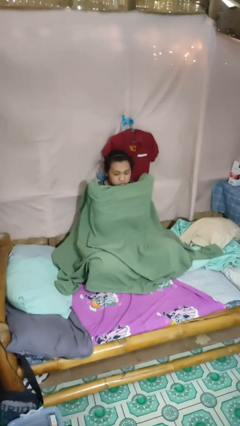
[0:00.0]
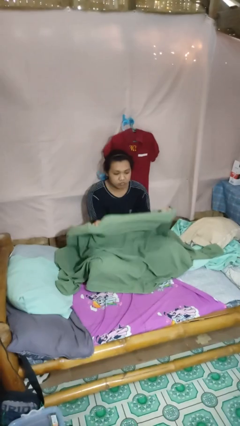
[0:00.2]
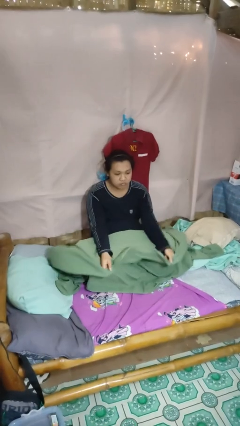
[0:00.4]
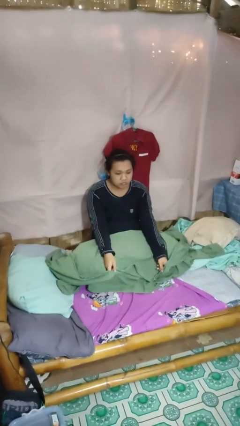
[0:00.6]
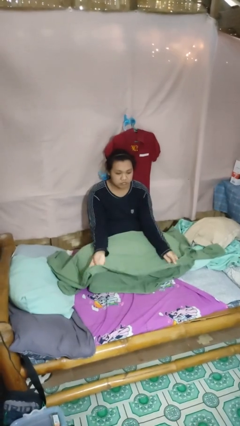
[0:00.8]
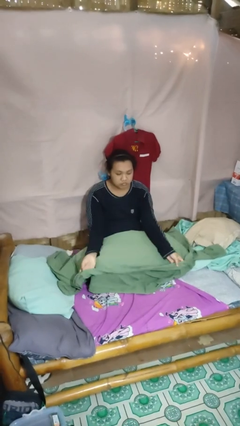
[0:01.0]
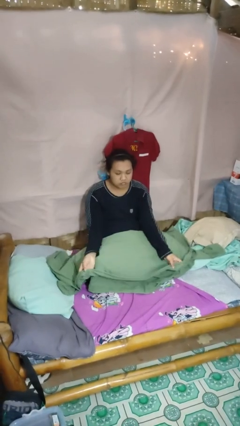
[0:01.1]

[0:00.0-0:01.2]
person uncovers with blanket

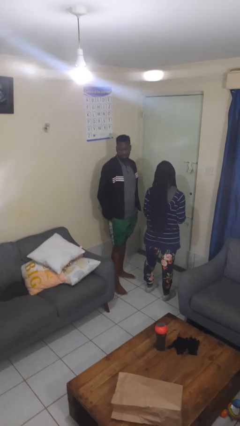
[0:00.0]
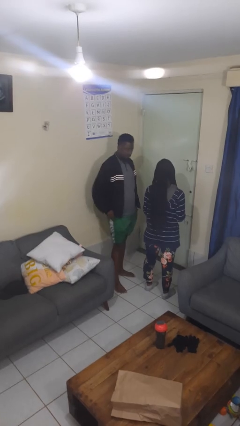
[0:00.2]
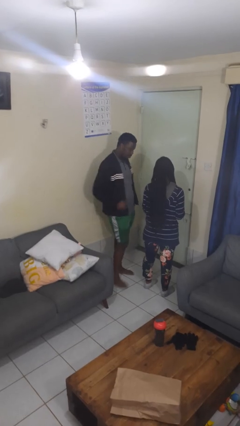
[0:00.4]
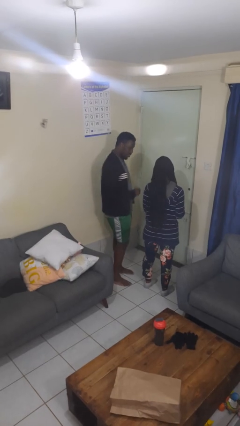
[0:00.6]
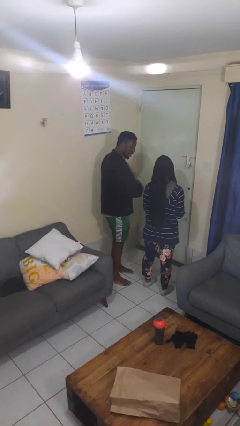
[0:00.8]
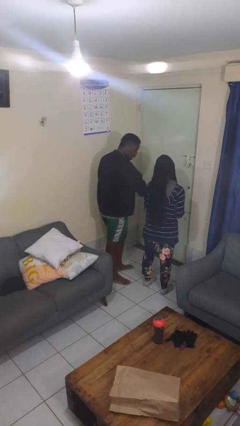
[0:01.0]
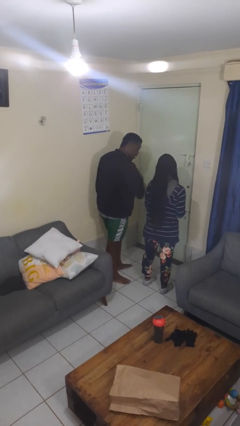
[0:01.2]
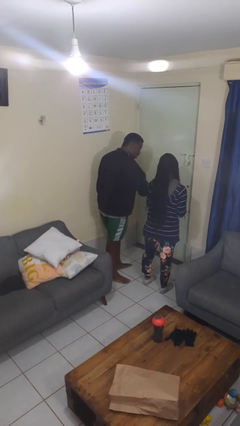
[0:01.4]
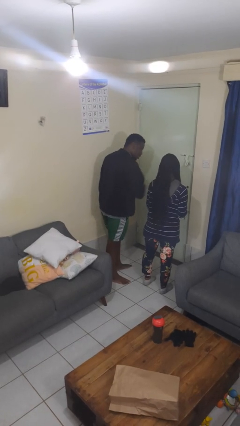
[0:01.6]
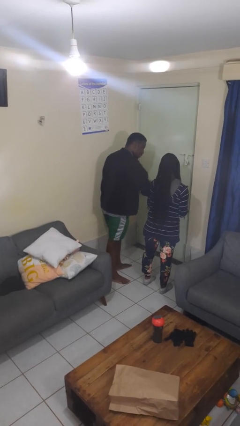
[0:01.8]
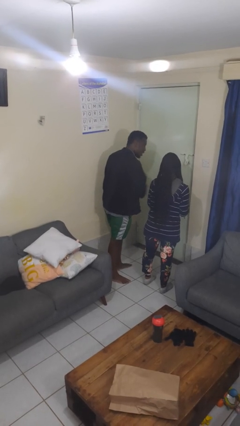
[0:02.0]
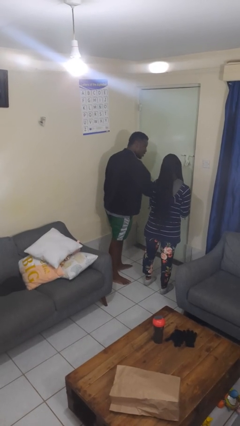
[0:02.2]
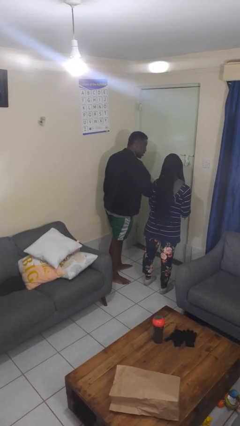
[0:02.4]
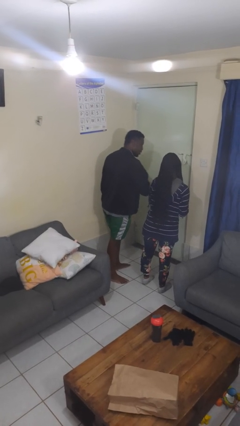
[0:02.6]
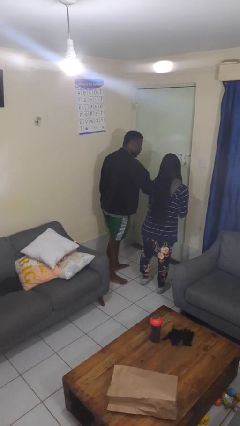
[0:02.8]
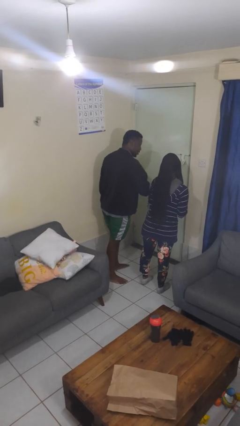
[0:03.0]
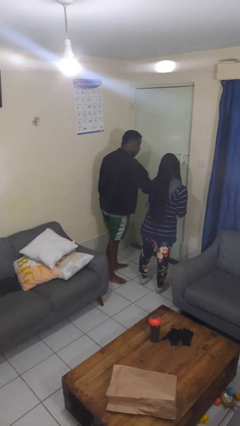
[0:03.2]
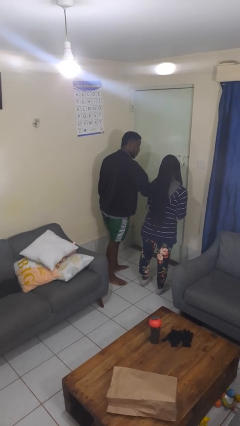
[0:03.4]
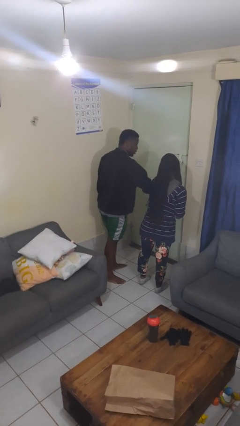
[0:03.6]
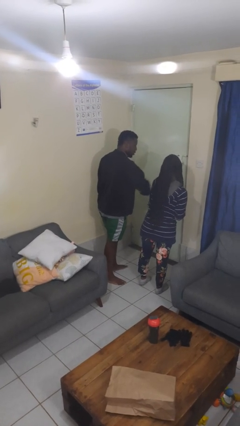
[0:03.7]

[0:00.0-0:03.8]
person nudges person with elbow

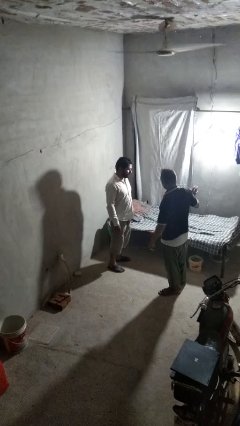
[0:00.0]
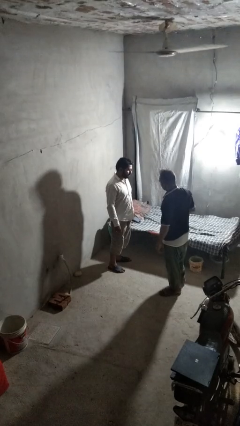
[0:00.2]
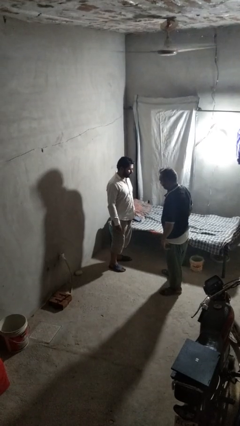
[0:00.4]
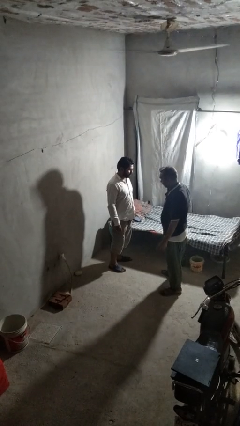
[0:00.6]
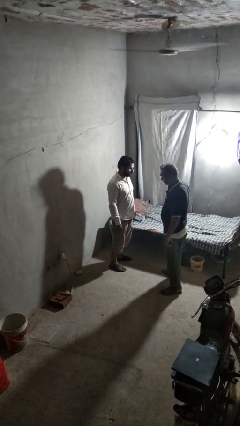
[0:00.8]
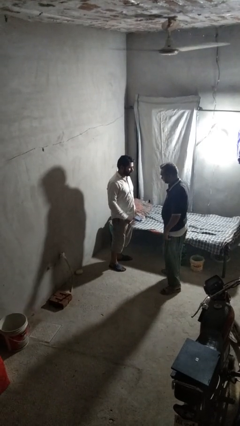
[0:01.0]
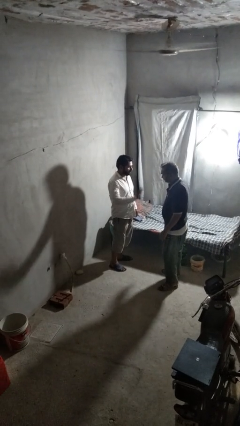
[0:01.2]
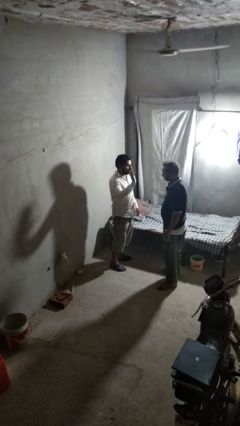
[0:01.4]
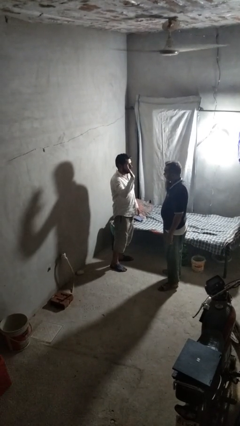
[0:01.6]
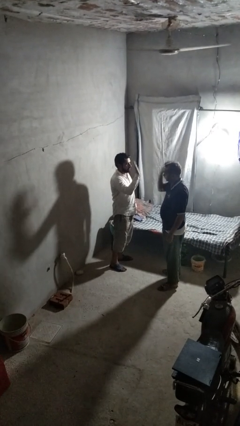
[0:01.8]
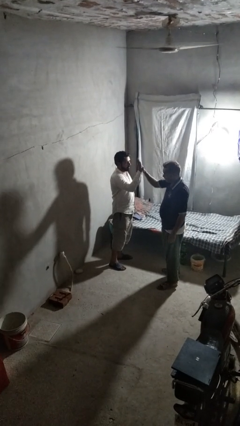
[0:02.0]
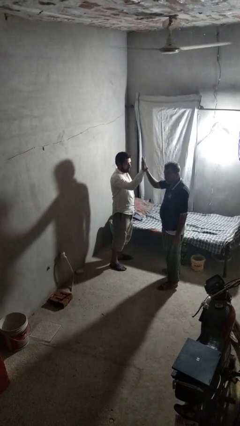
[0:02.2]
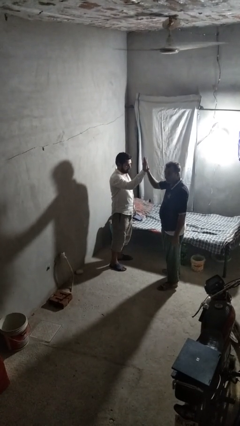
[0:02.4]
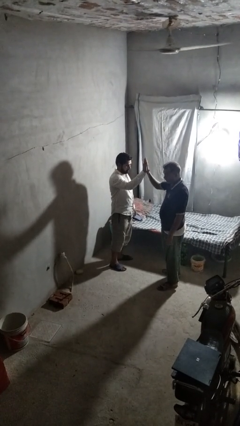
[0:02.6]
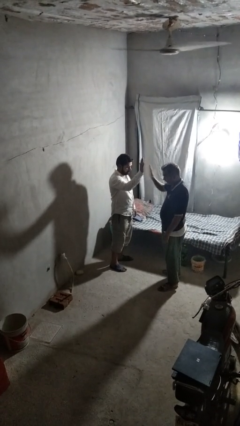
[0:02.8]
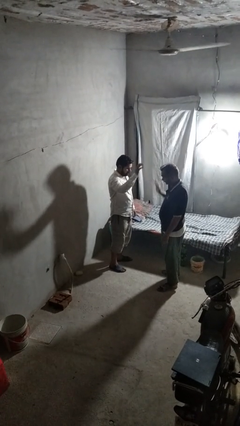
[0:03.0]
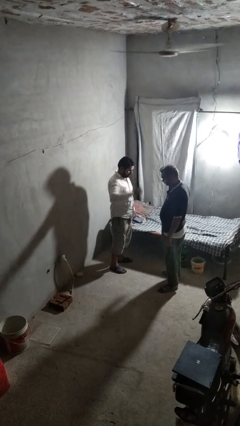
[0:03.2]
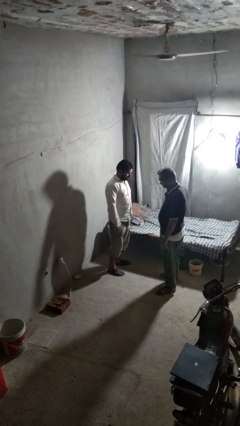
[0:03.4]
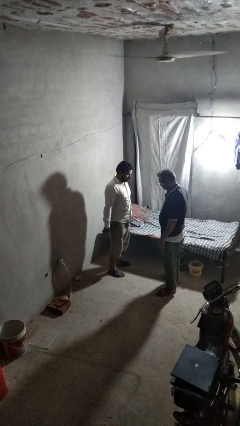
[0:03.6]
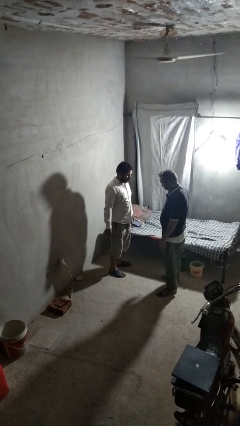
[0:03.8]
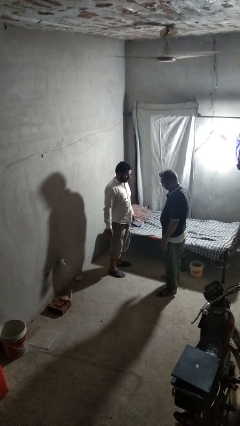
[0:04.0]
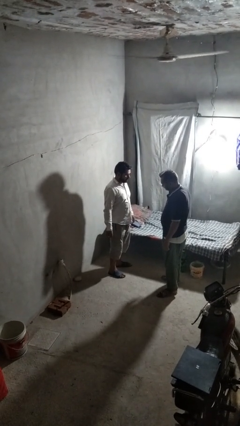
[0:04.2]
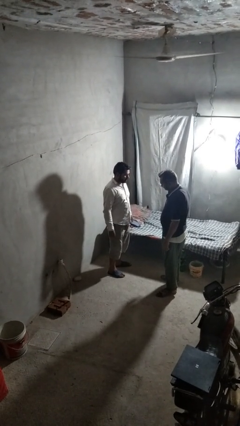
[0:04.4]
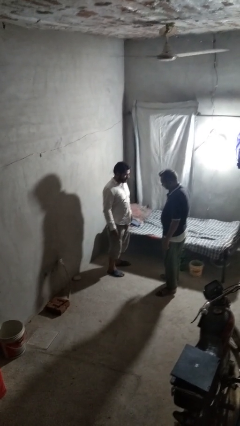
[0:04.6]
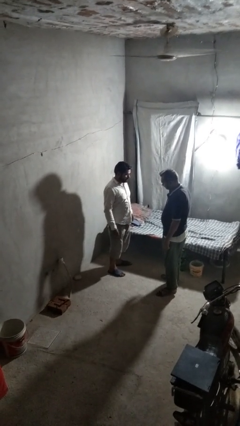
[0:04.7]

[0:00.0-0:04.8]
person highfives hand

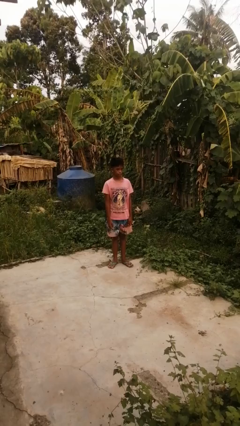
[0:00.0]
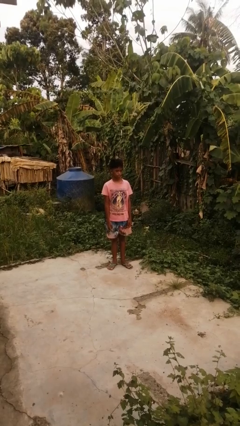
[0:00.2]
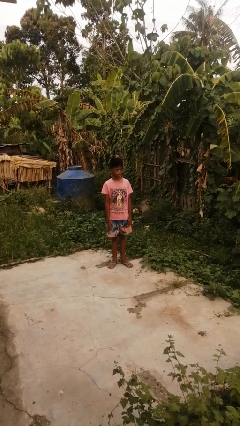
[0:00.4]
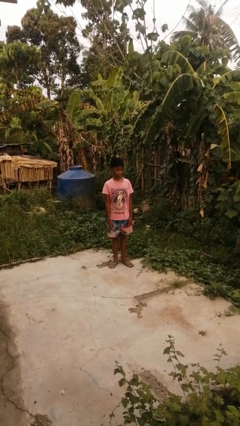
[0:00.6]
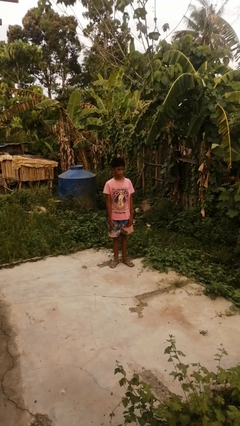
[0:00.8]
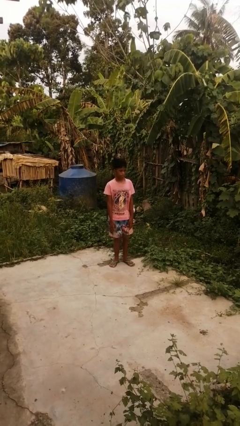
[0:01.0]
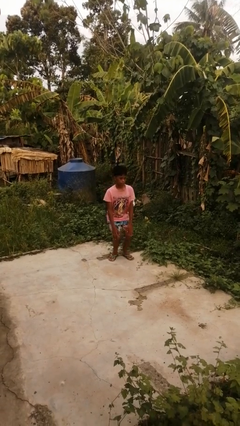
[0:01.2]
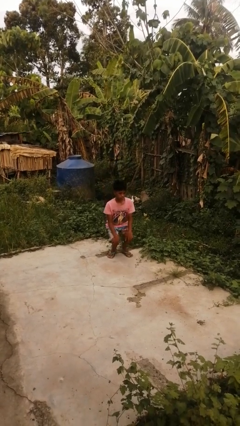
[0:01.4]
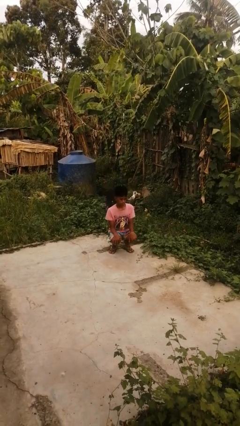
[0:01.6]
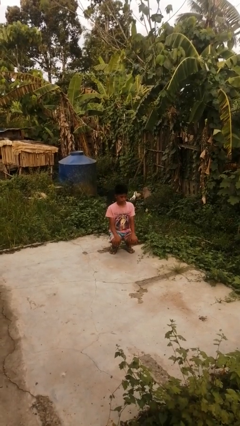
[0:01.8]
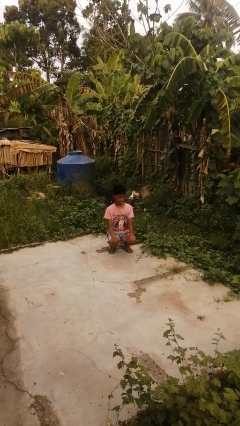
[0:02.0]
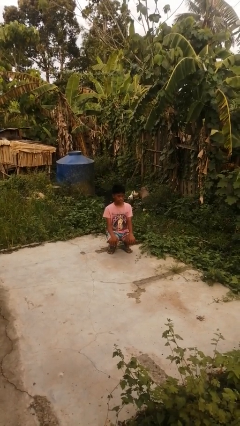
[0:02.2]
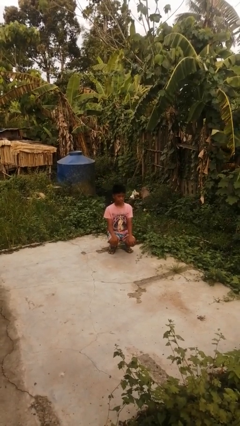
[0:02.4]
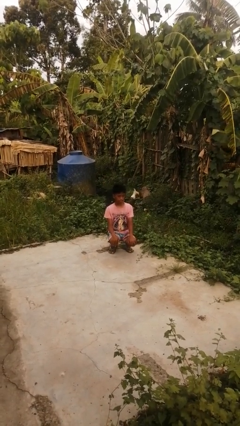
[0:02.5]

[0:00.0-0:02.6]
person squats

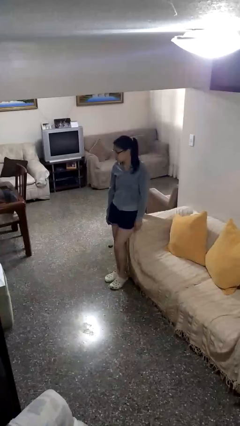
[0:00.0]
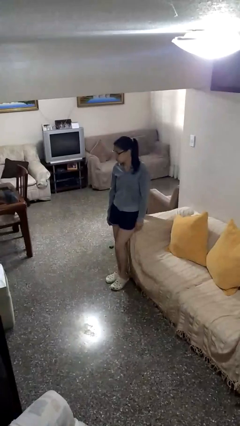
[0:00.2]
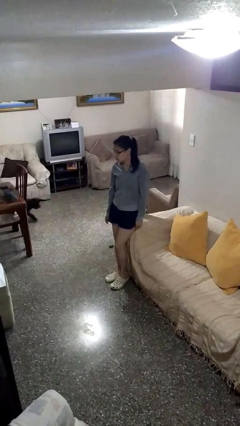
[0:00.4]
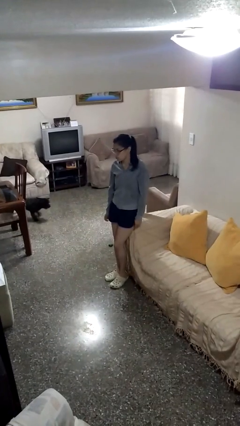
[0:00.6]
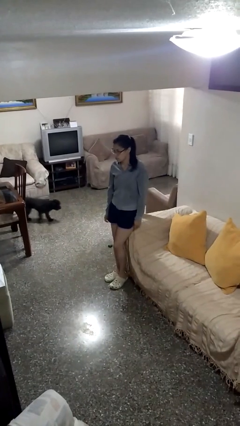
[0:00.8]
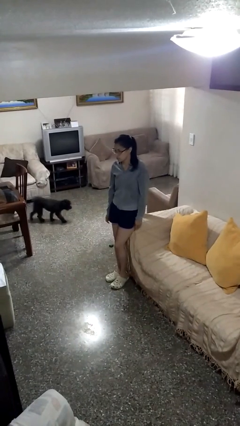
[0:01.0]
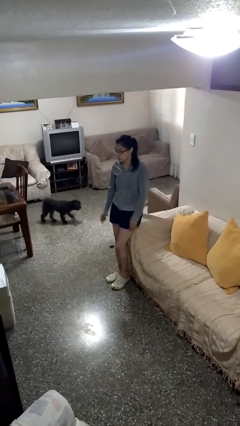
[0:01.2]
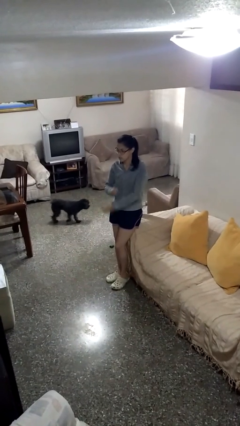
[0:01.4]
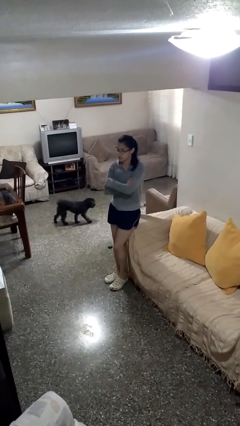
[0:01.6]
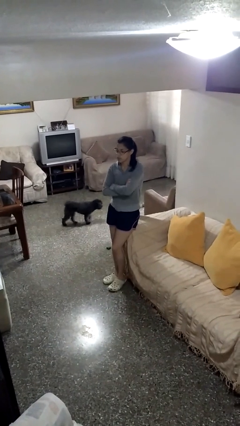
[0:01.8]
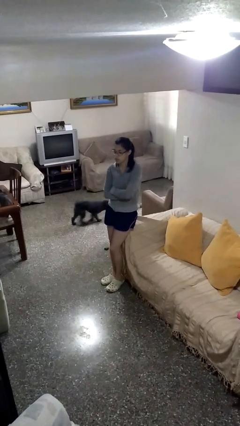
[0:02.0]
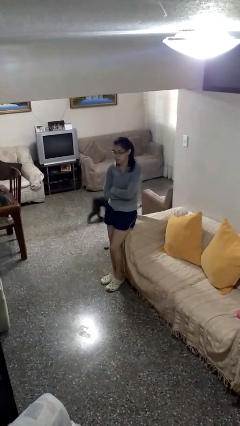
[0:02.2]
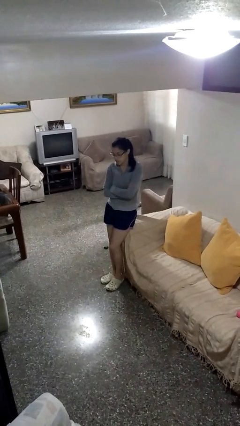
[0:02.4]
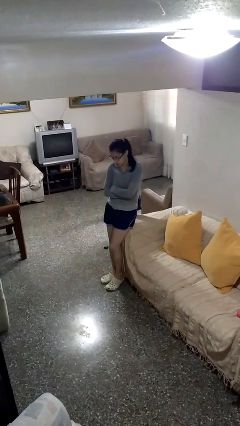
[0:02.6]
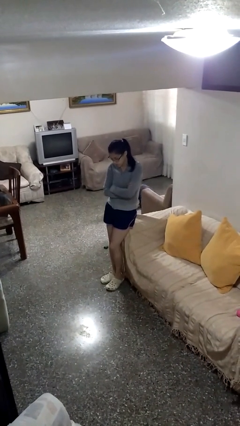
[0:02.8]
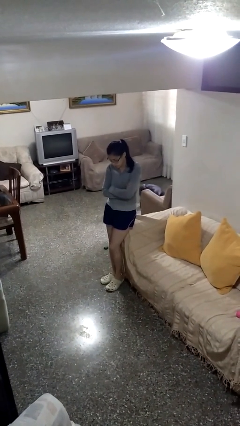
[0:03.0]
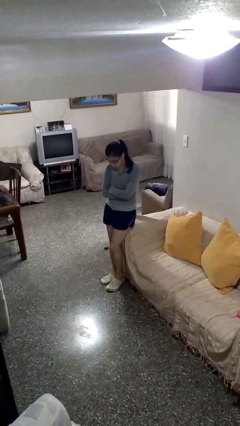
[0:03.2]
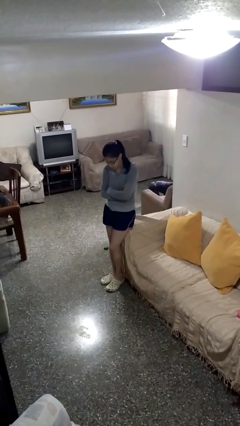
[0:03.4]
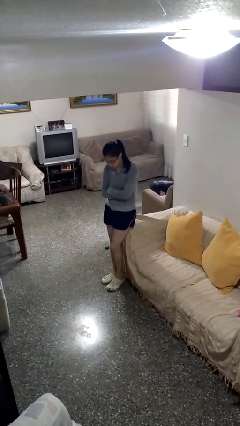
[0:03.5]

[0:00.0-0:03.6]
person crosses arms

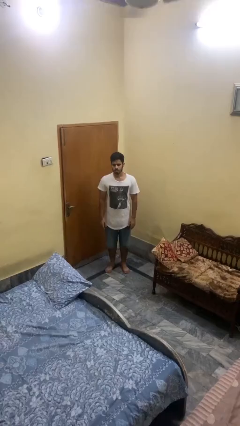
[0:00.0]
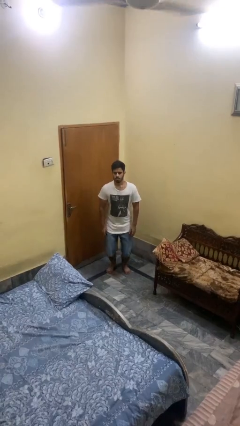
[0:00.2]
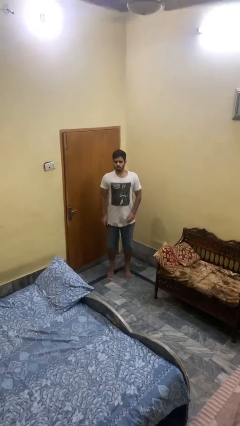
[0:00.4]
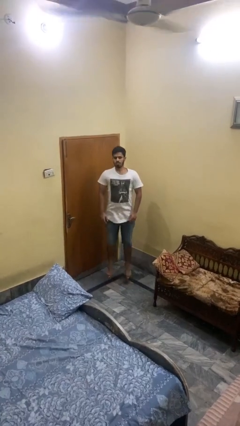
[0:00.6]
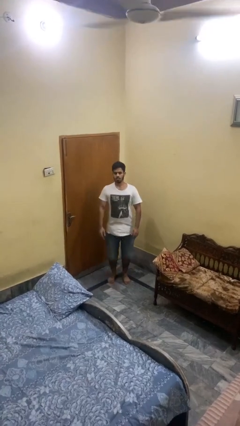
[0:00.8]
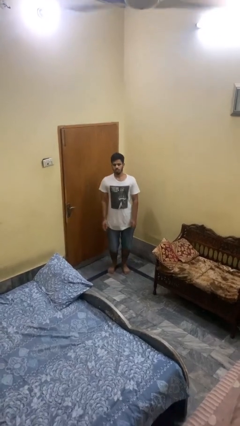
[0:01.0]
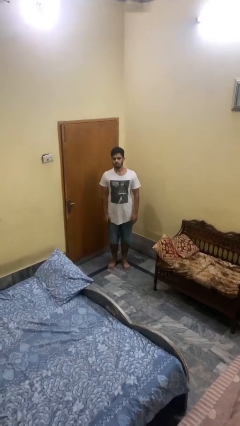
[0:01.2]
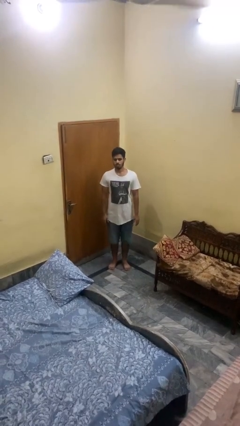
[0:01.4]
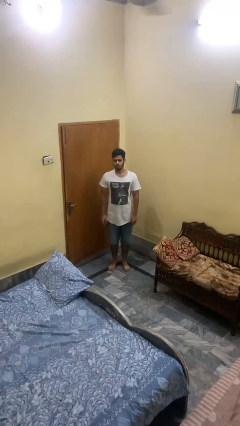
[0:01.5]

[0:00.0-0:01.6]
person jumps
